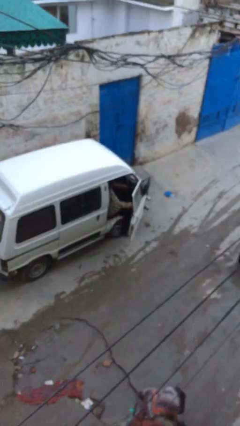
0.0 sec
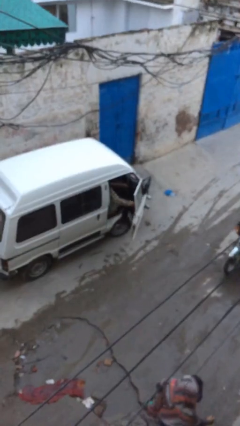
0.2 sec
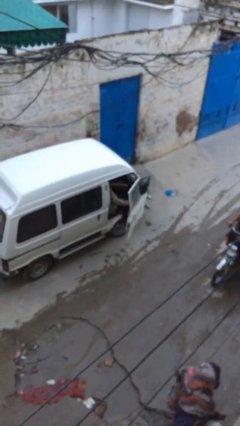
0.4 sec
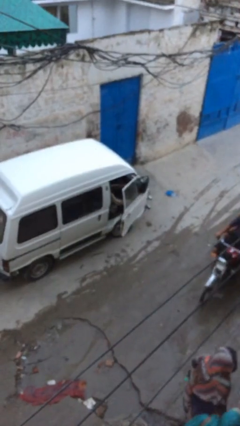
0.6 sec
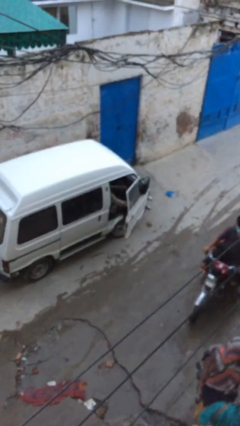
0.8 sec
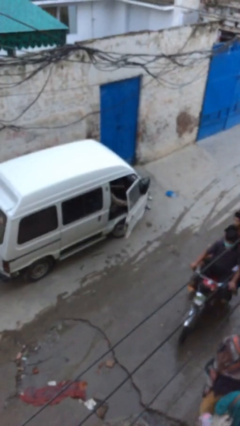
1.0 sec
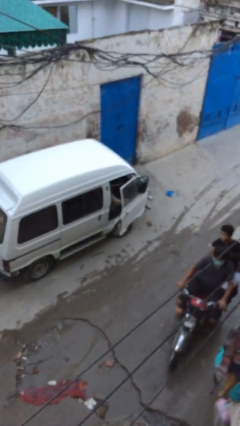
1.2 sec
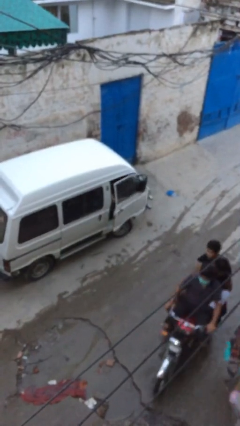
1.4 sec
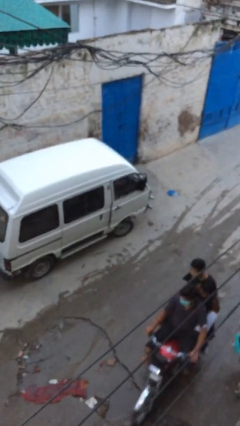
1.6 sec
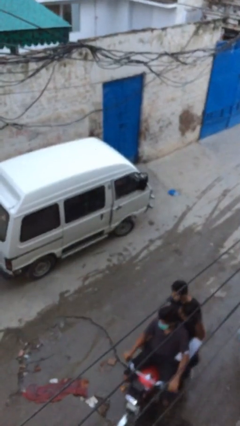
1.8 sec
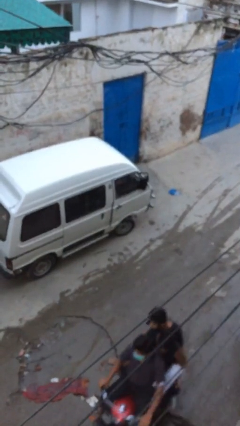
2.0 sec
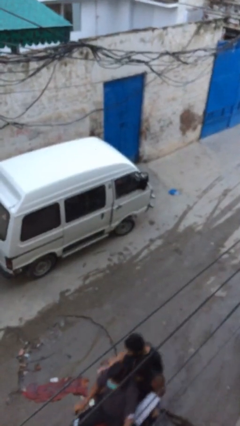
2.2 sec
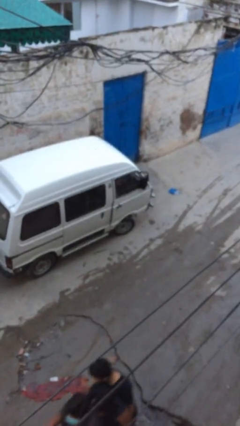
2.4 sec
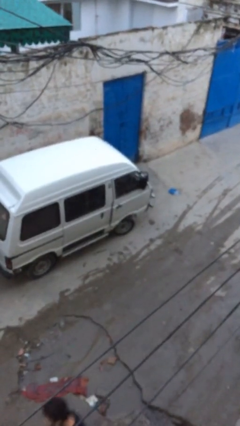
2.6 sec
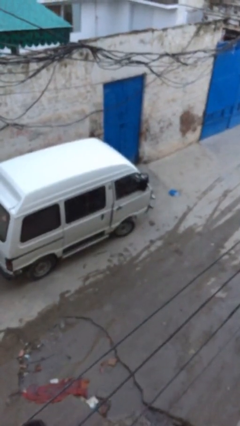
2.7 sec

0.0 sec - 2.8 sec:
person closes car door

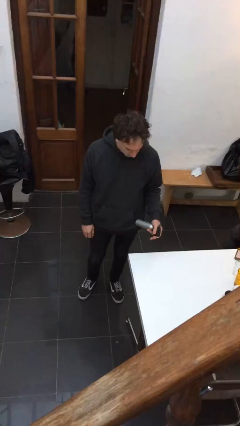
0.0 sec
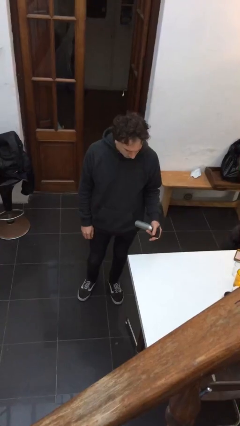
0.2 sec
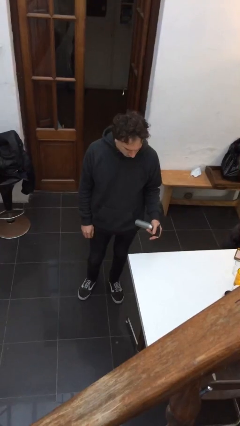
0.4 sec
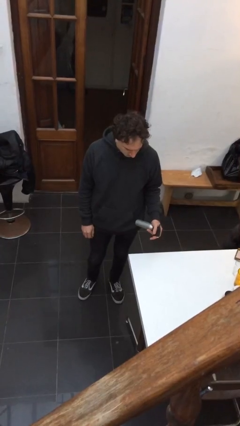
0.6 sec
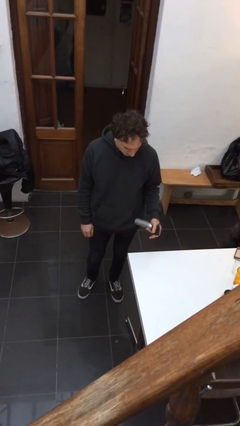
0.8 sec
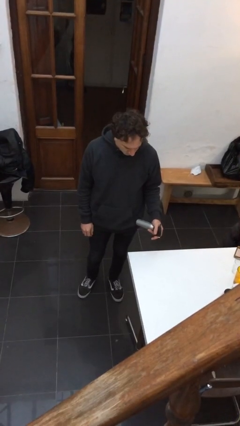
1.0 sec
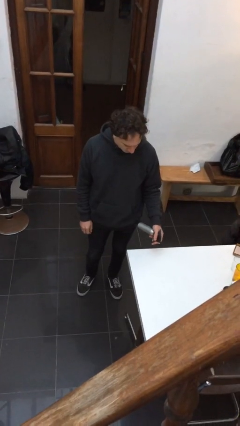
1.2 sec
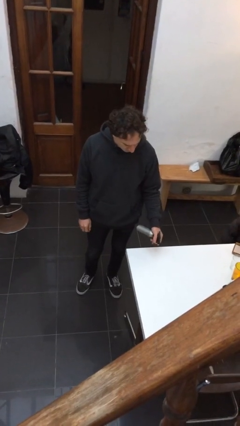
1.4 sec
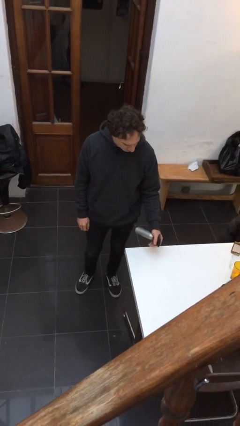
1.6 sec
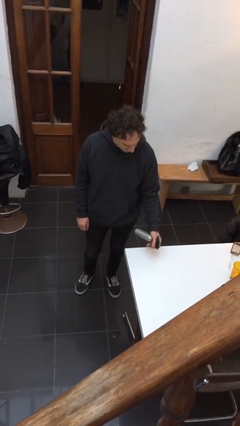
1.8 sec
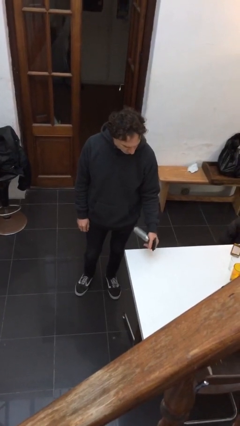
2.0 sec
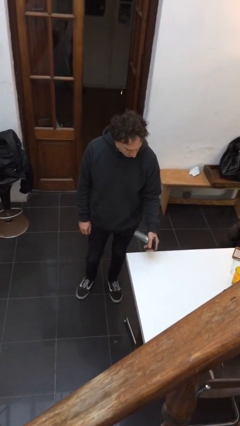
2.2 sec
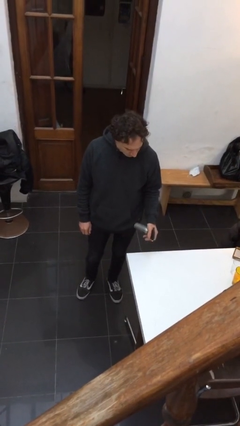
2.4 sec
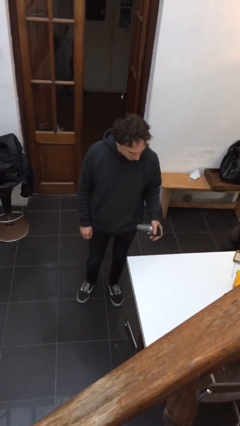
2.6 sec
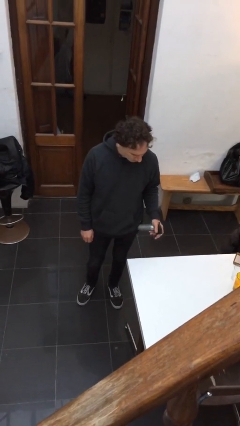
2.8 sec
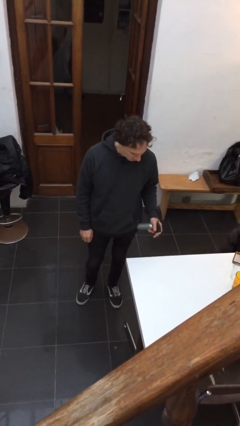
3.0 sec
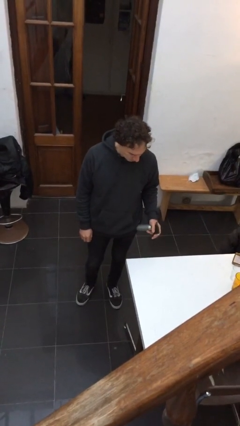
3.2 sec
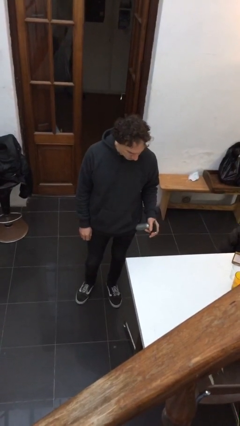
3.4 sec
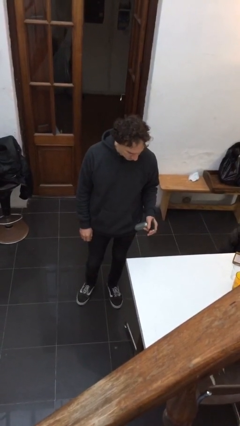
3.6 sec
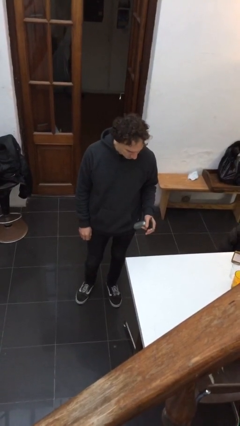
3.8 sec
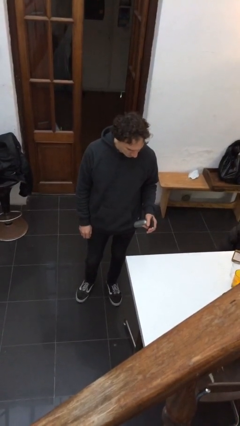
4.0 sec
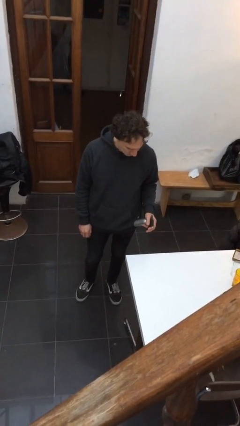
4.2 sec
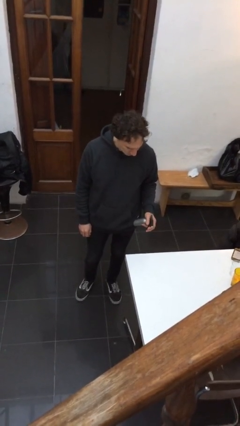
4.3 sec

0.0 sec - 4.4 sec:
person sprays from bottle

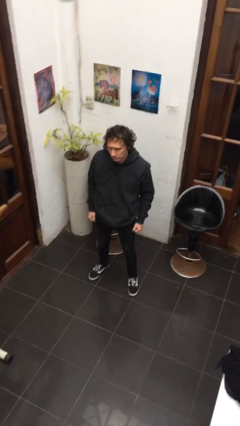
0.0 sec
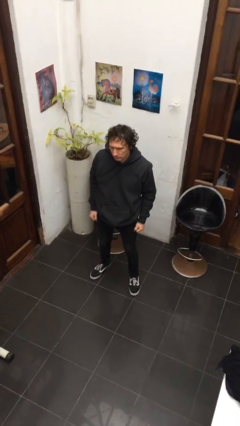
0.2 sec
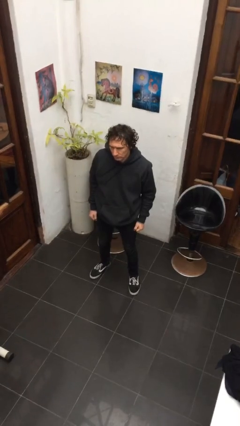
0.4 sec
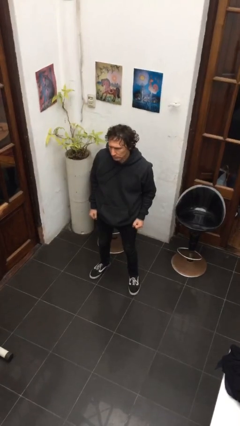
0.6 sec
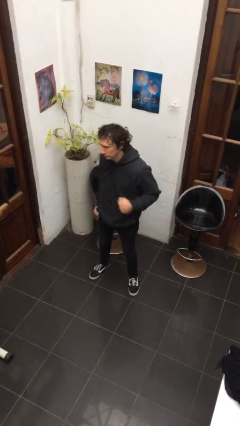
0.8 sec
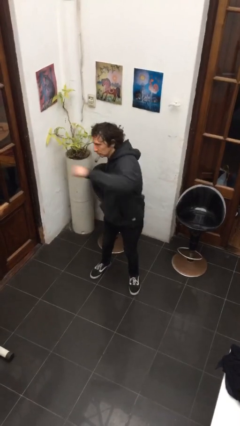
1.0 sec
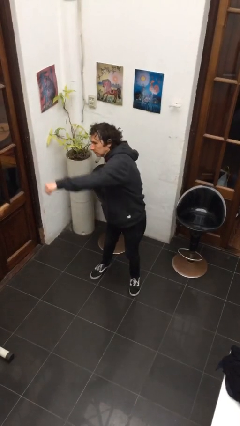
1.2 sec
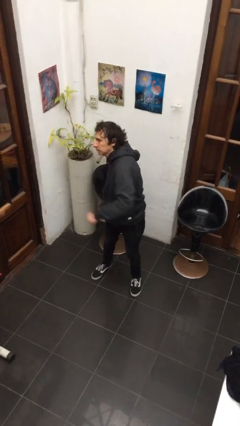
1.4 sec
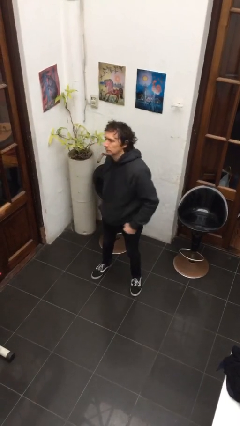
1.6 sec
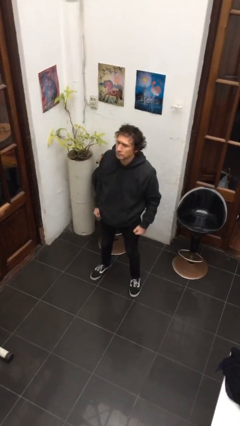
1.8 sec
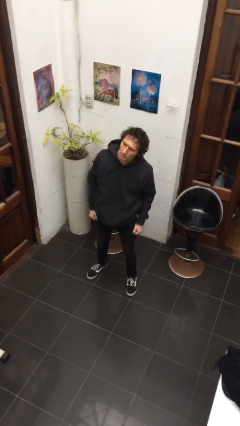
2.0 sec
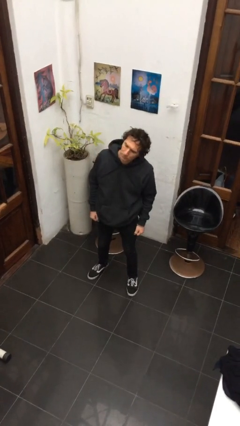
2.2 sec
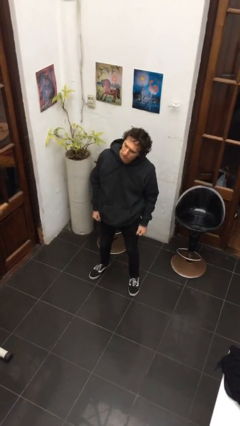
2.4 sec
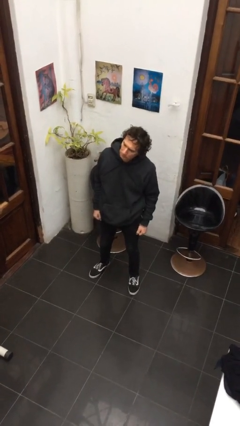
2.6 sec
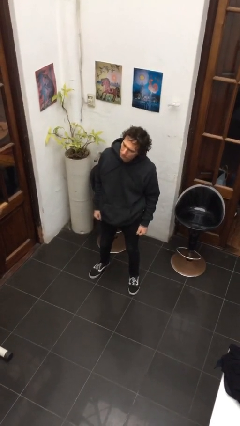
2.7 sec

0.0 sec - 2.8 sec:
person punches

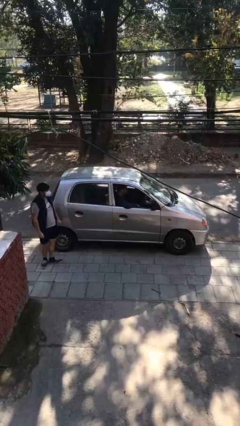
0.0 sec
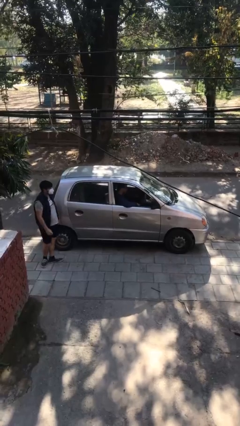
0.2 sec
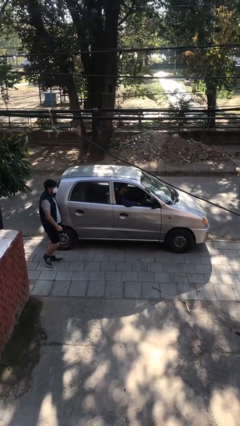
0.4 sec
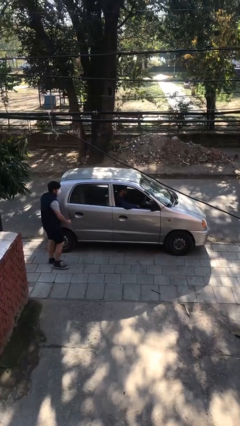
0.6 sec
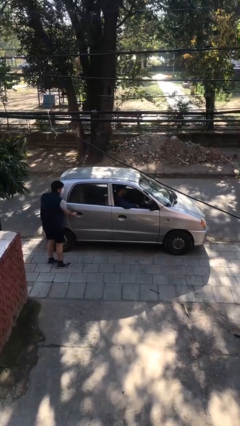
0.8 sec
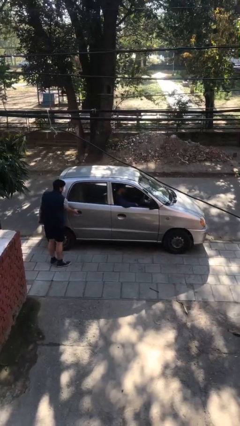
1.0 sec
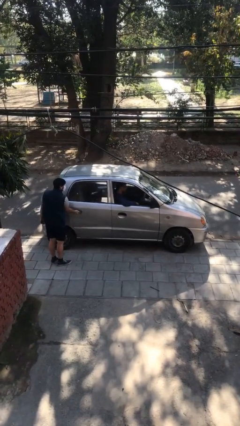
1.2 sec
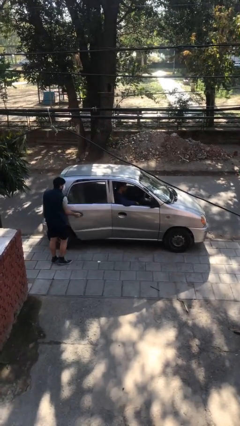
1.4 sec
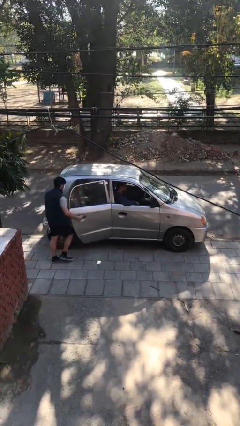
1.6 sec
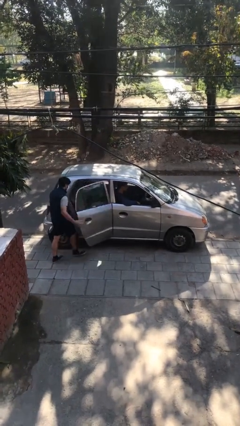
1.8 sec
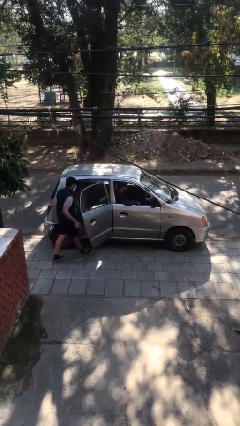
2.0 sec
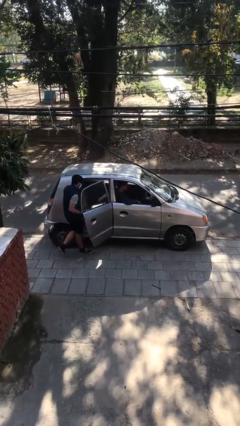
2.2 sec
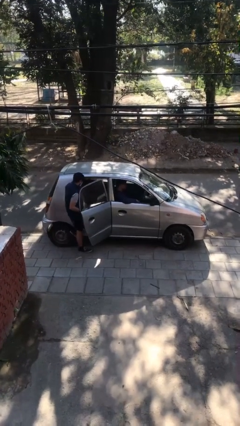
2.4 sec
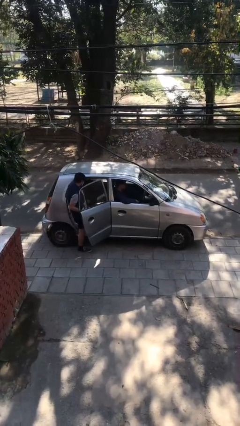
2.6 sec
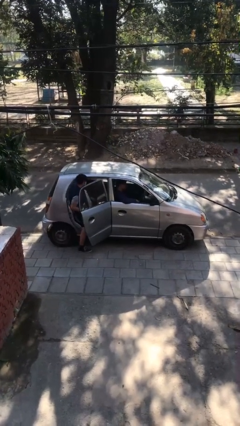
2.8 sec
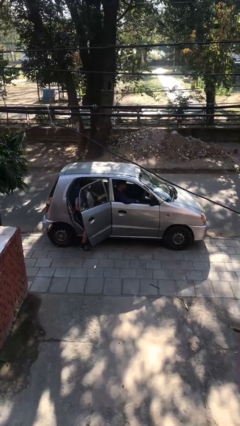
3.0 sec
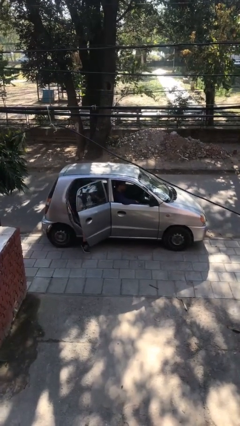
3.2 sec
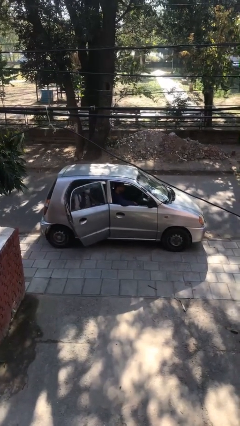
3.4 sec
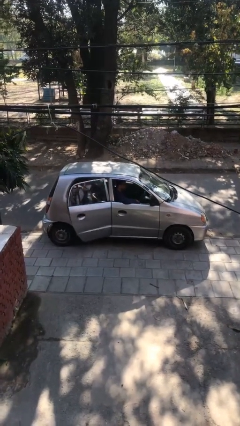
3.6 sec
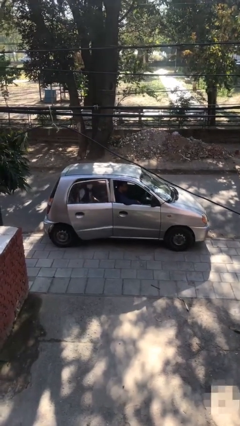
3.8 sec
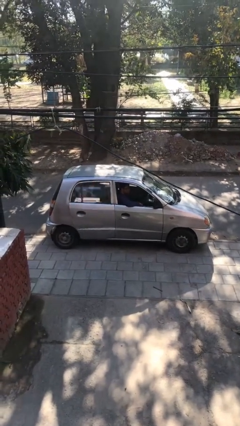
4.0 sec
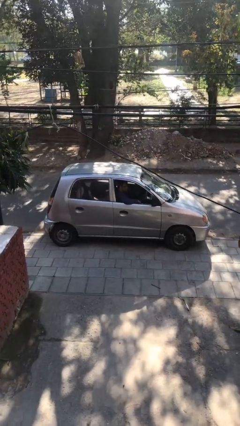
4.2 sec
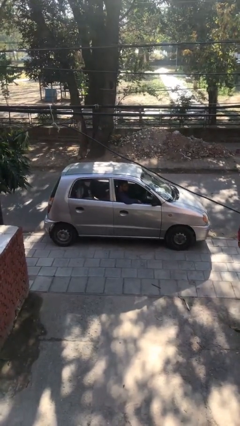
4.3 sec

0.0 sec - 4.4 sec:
car picks up person

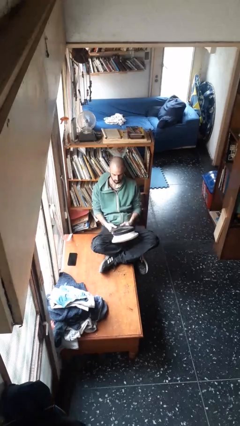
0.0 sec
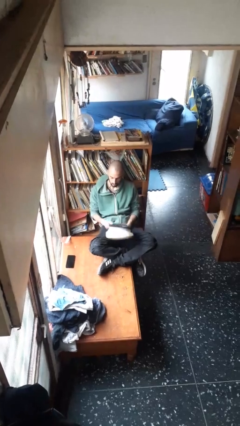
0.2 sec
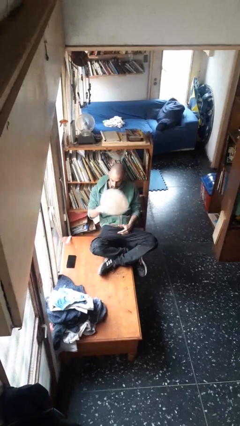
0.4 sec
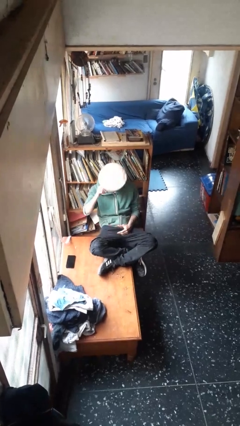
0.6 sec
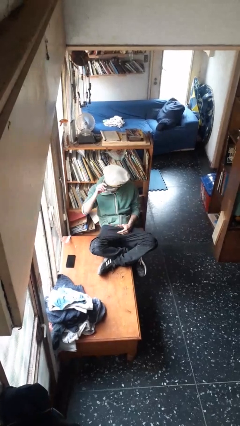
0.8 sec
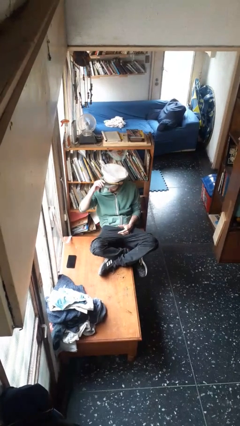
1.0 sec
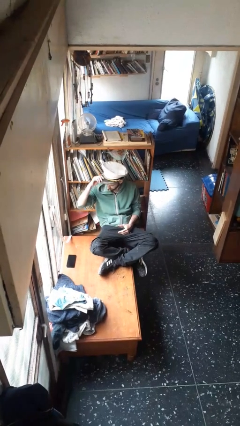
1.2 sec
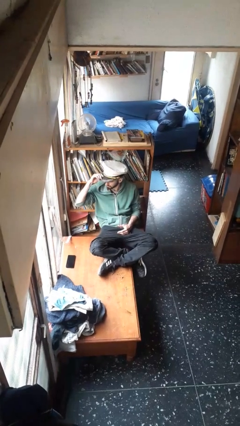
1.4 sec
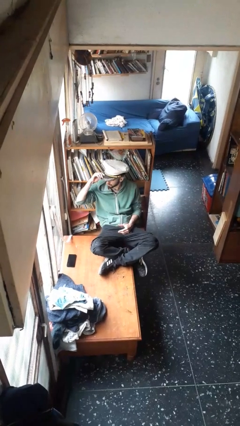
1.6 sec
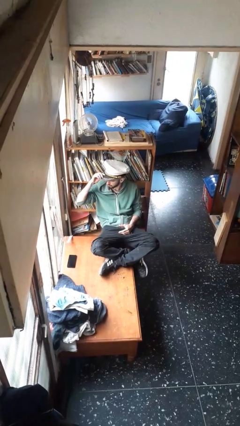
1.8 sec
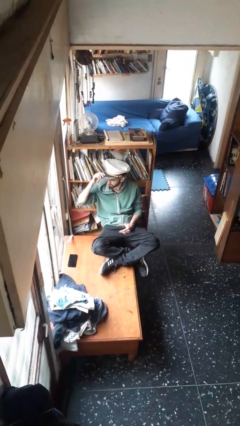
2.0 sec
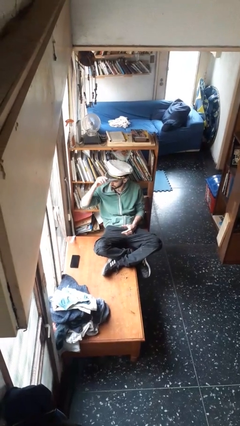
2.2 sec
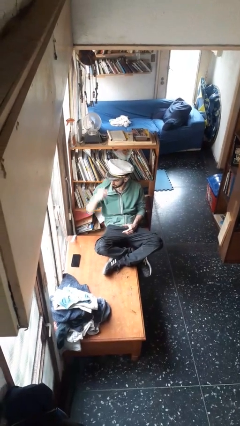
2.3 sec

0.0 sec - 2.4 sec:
person puts on hat

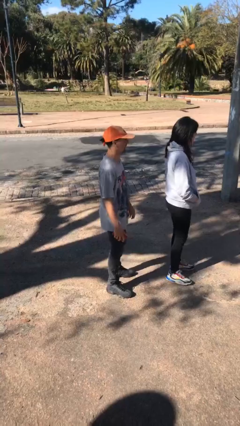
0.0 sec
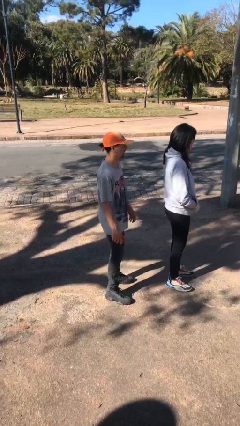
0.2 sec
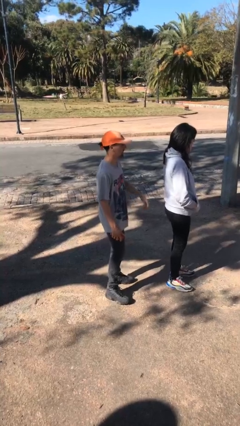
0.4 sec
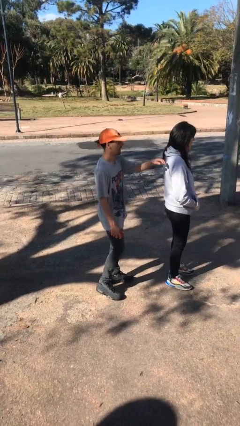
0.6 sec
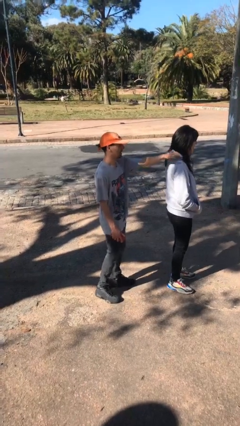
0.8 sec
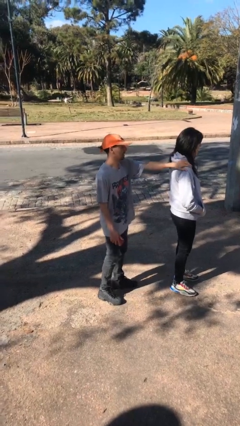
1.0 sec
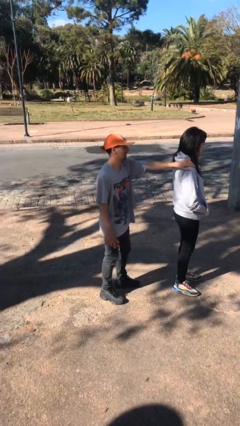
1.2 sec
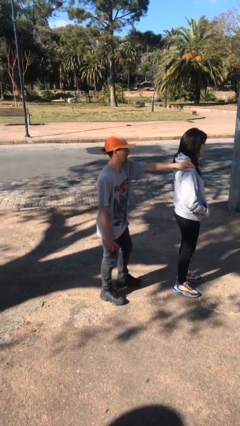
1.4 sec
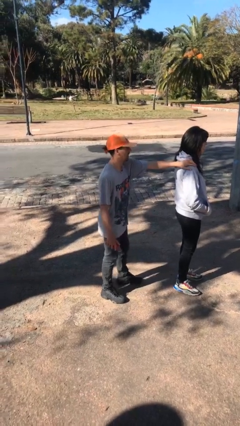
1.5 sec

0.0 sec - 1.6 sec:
person grabs person by shoulder
